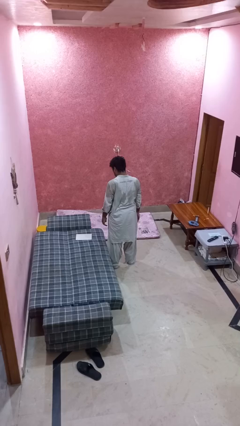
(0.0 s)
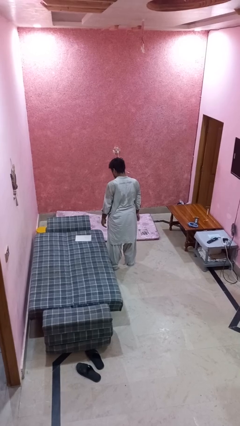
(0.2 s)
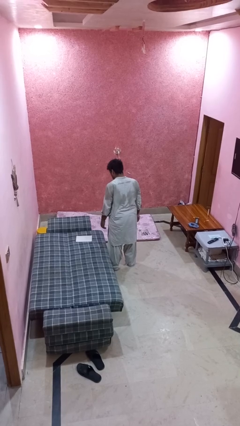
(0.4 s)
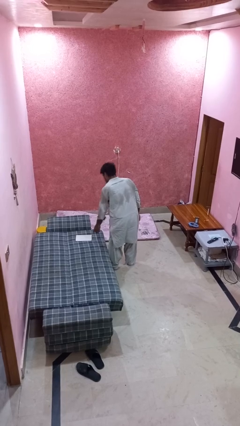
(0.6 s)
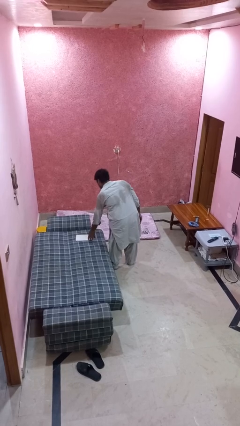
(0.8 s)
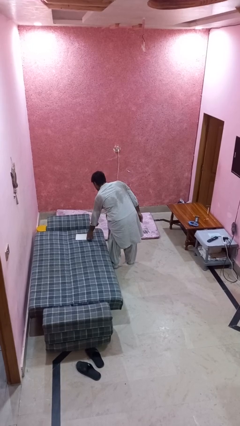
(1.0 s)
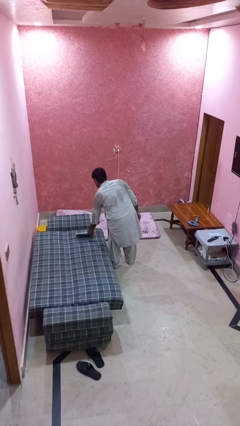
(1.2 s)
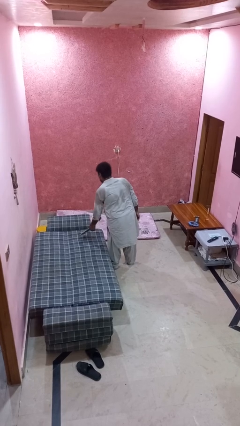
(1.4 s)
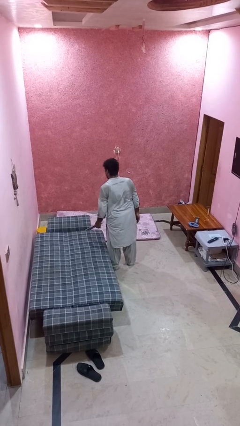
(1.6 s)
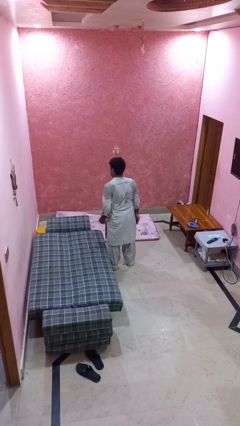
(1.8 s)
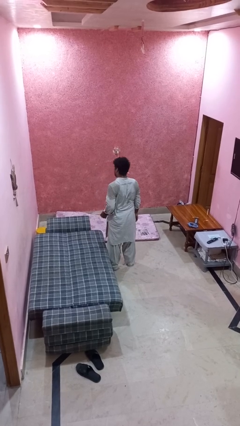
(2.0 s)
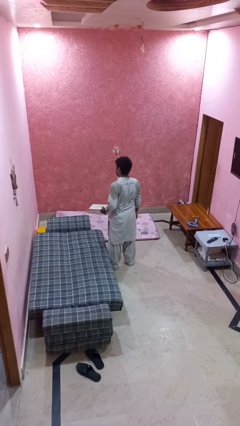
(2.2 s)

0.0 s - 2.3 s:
person picks up object from bed

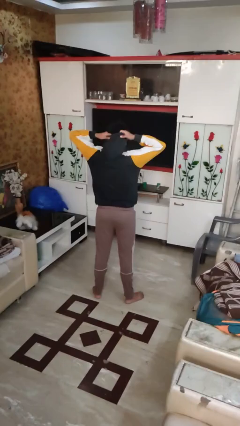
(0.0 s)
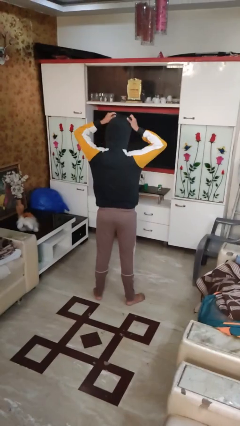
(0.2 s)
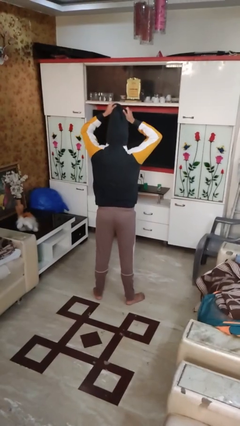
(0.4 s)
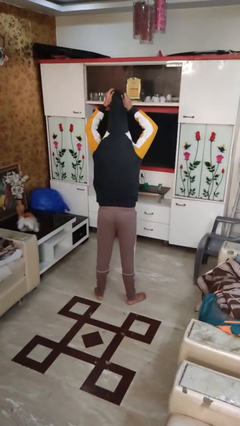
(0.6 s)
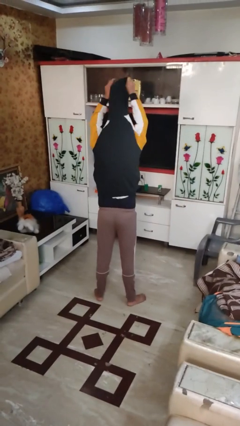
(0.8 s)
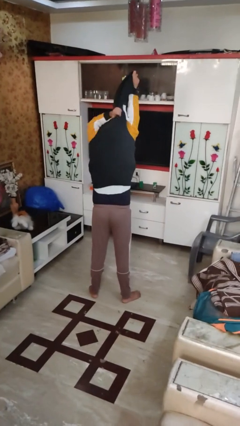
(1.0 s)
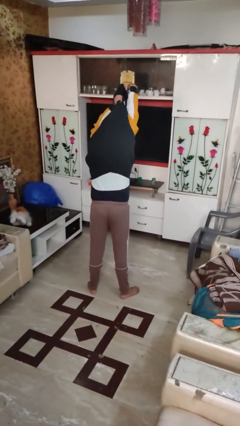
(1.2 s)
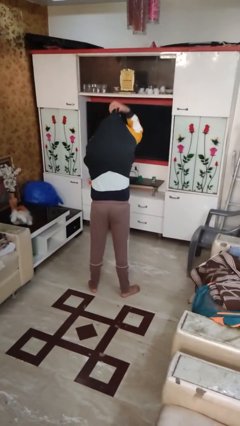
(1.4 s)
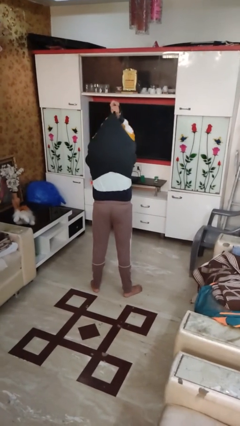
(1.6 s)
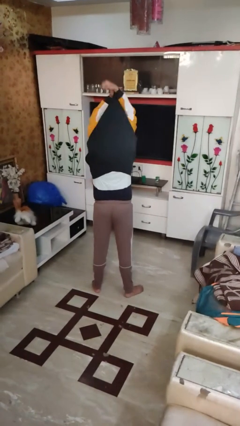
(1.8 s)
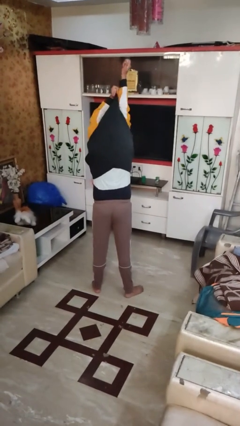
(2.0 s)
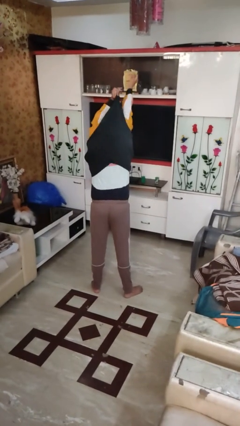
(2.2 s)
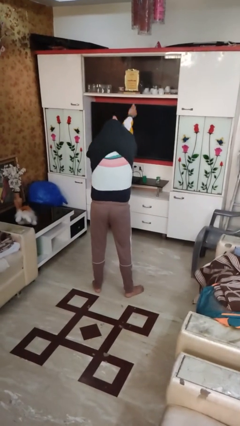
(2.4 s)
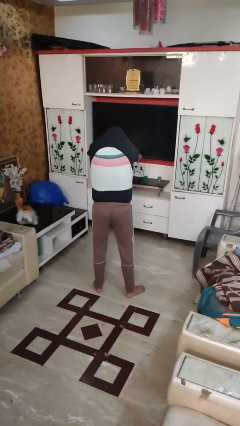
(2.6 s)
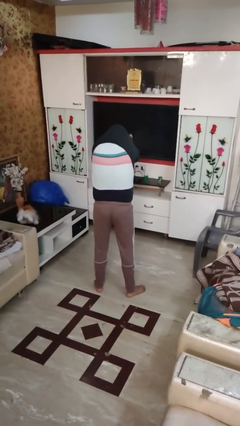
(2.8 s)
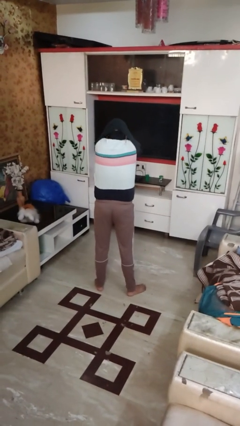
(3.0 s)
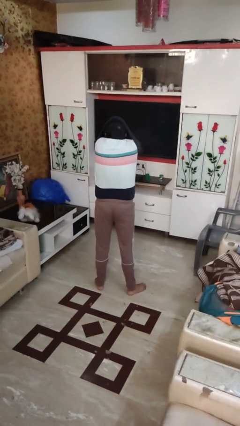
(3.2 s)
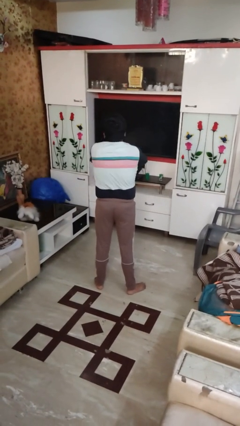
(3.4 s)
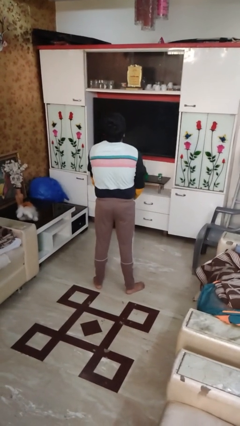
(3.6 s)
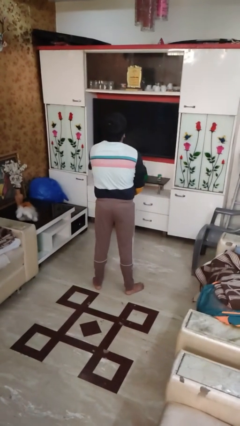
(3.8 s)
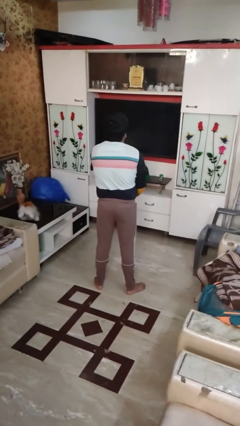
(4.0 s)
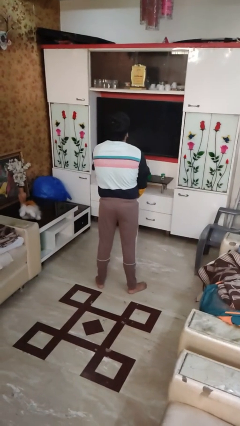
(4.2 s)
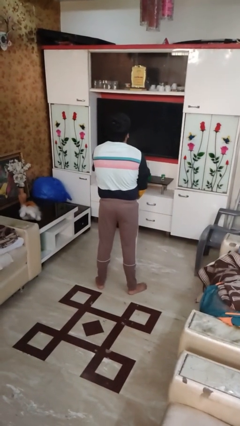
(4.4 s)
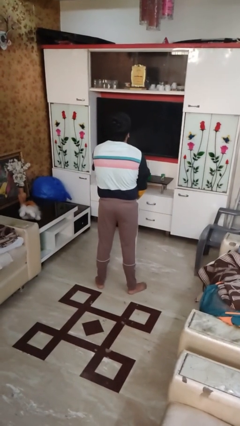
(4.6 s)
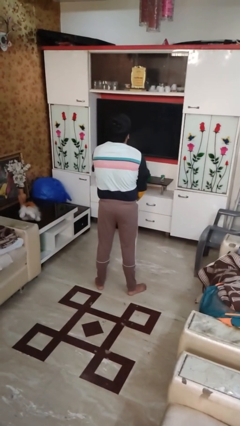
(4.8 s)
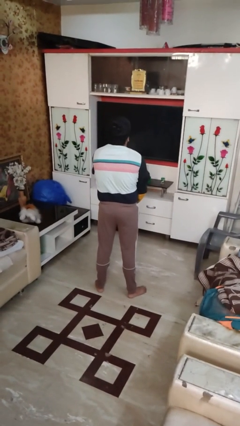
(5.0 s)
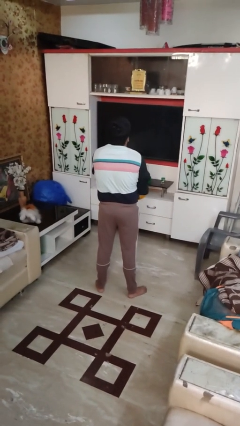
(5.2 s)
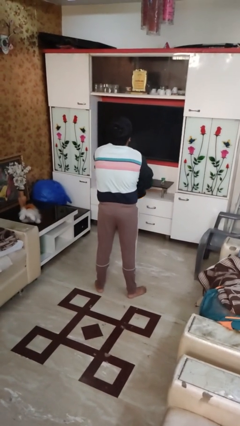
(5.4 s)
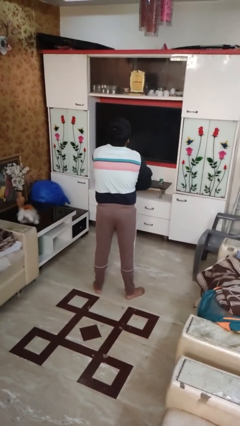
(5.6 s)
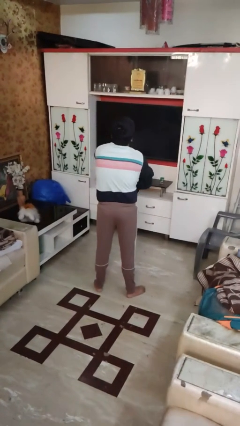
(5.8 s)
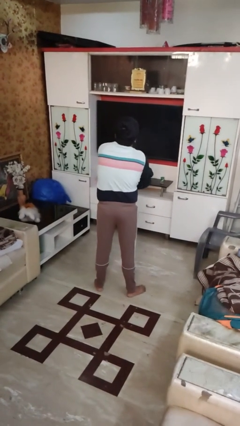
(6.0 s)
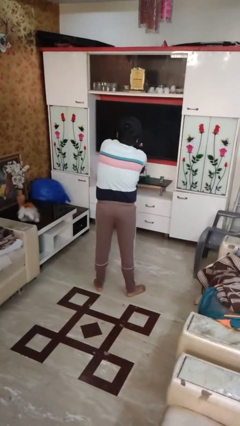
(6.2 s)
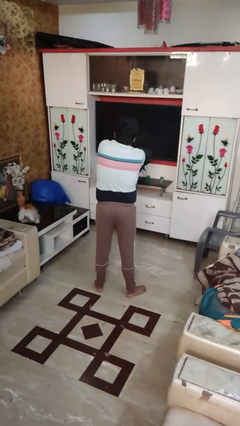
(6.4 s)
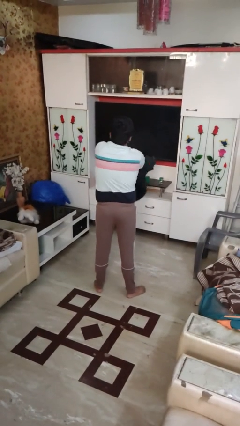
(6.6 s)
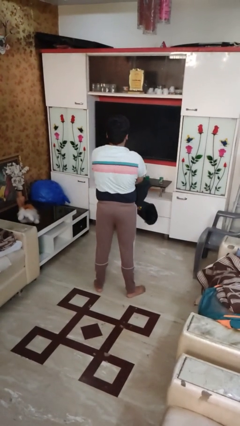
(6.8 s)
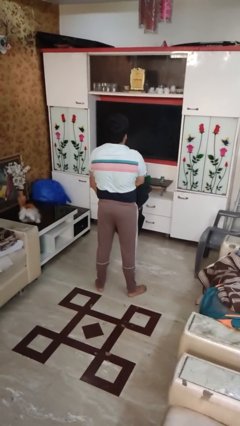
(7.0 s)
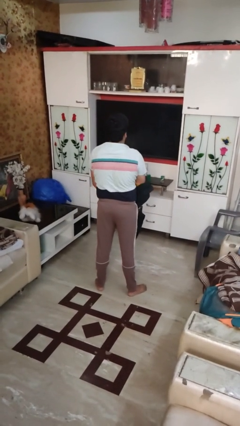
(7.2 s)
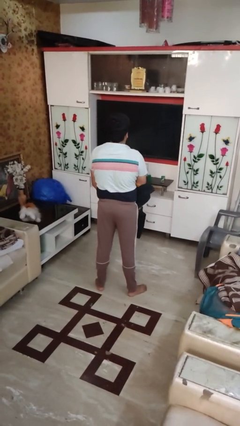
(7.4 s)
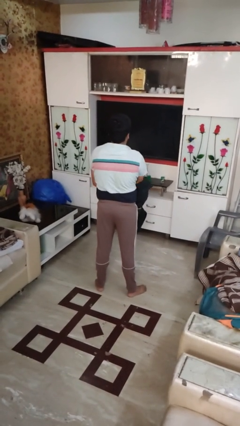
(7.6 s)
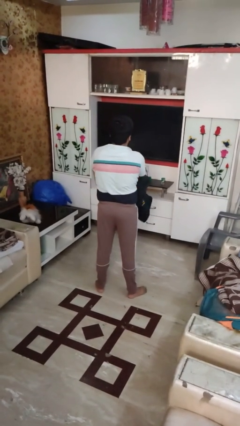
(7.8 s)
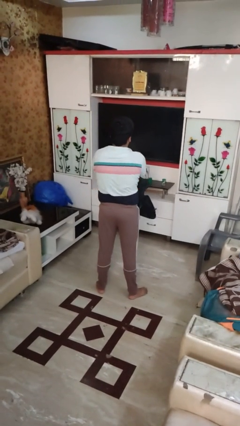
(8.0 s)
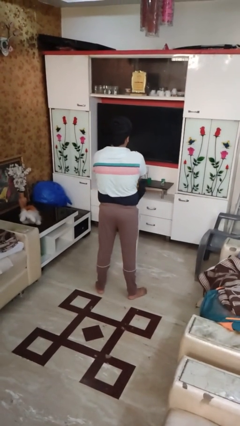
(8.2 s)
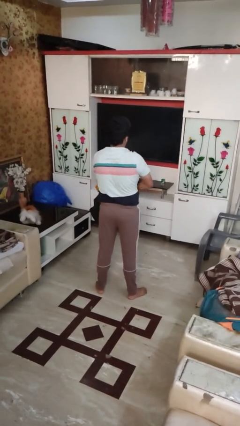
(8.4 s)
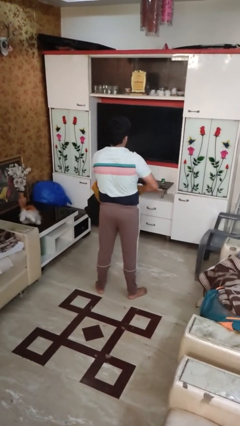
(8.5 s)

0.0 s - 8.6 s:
person takes off hoodie

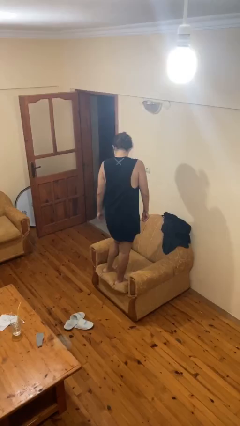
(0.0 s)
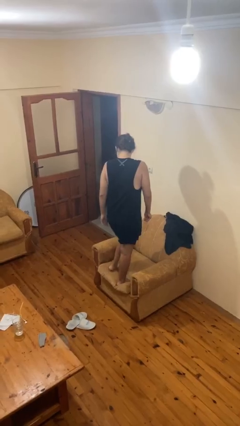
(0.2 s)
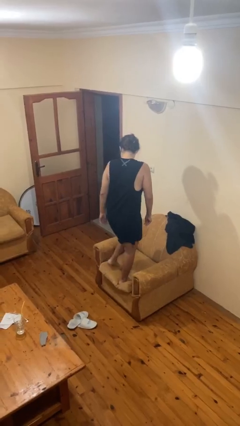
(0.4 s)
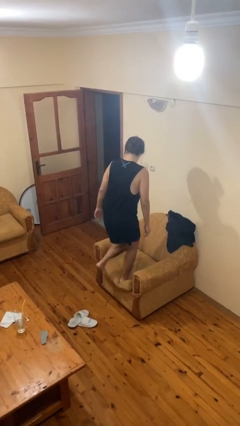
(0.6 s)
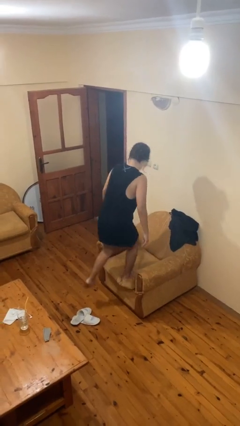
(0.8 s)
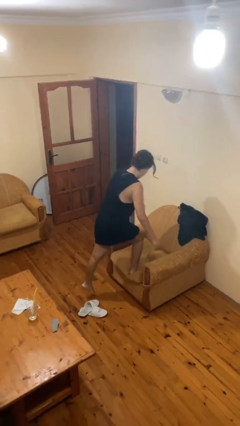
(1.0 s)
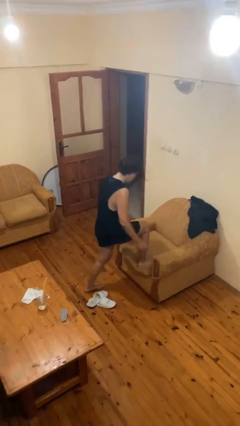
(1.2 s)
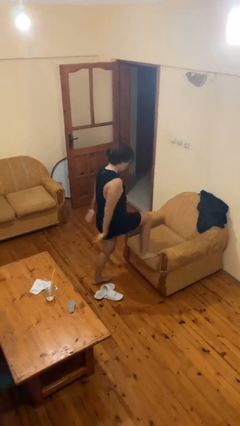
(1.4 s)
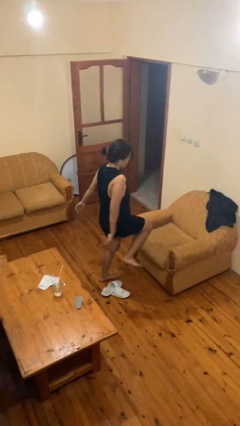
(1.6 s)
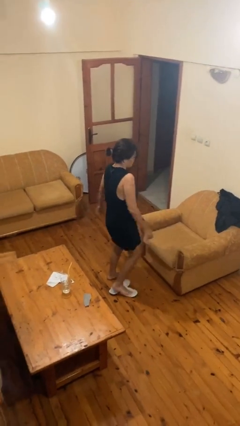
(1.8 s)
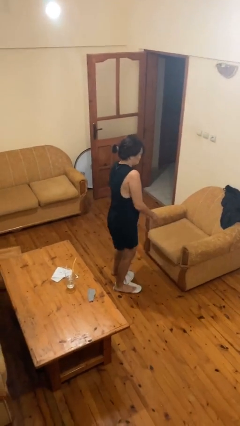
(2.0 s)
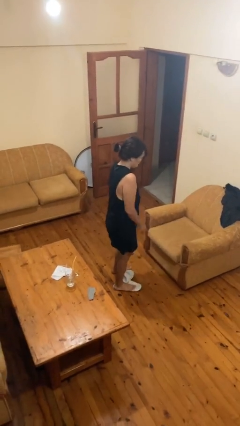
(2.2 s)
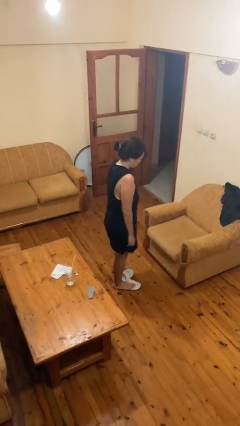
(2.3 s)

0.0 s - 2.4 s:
person climbs off chair

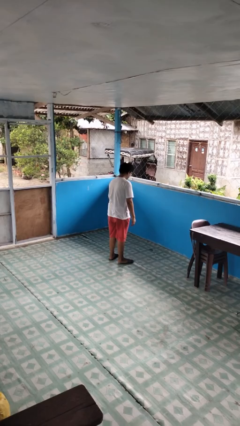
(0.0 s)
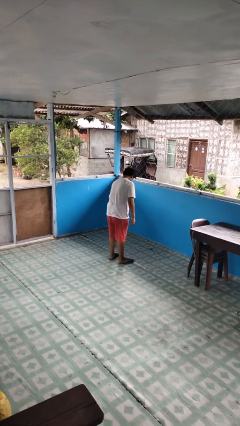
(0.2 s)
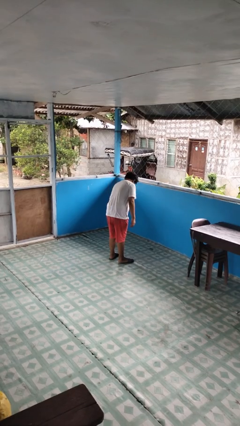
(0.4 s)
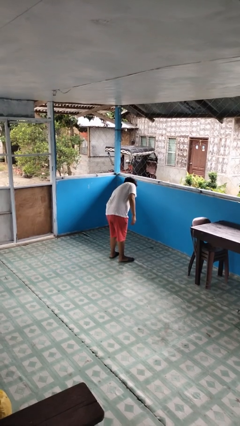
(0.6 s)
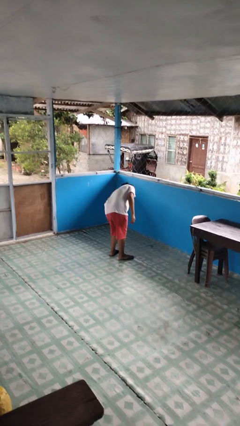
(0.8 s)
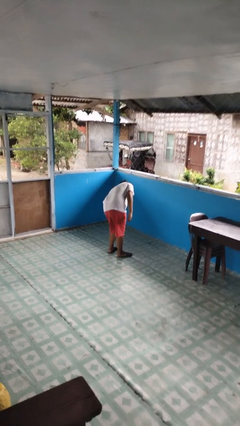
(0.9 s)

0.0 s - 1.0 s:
person swats bug

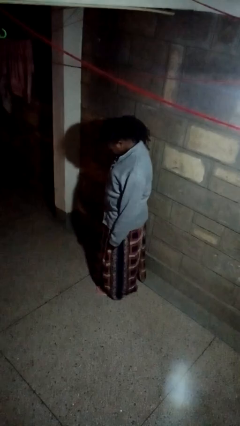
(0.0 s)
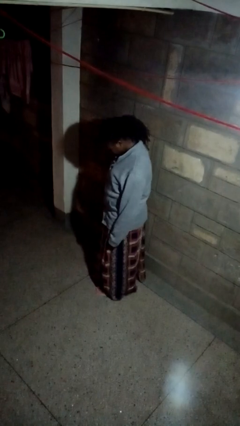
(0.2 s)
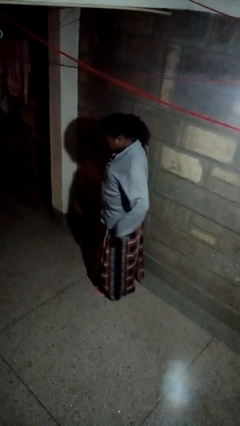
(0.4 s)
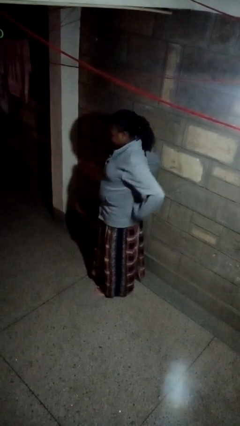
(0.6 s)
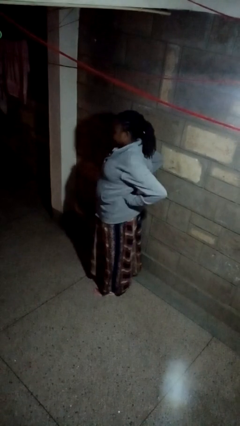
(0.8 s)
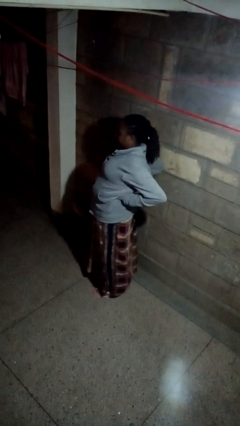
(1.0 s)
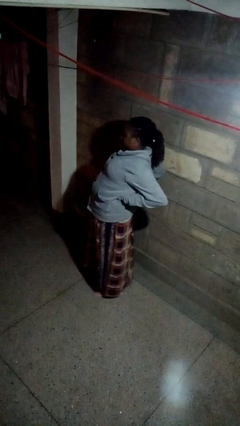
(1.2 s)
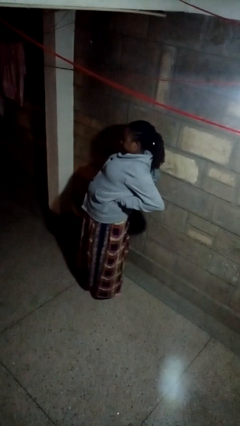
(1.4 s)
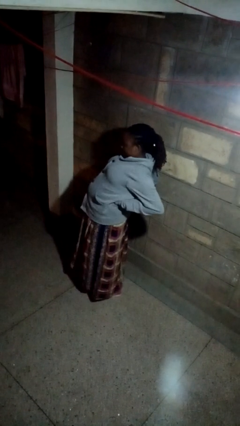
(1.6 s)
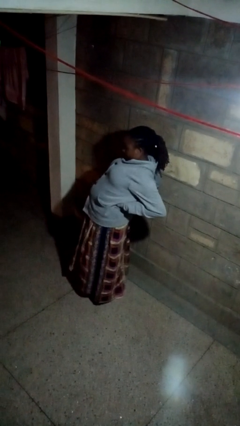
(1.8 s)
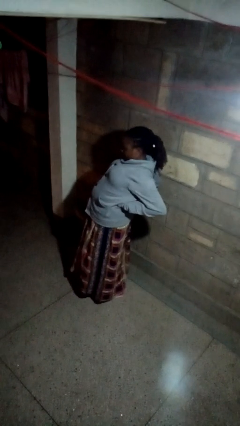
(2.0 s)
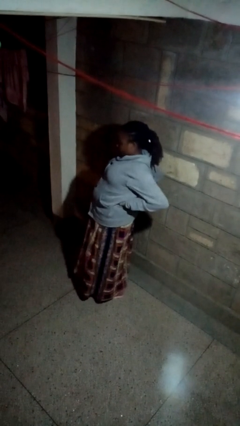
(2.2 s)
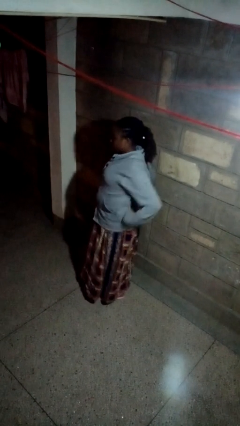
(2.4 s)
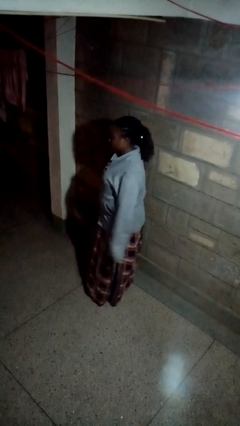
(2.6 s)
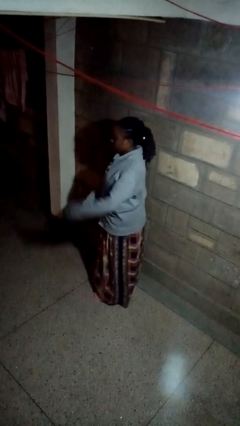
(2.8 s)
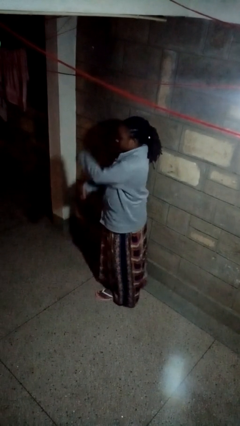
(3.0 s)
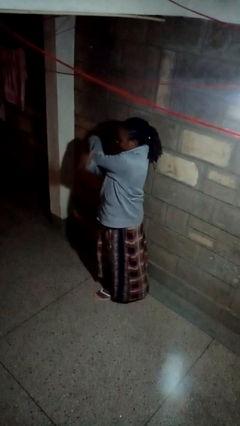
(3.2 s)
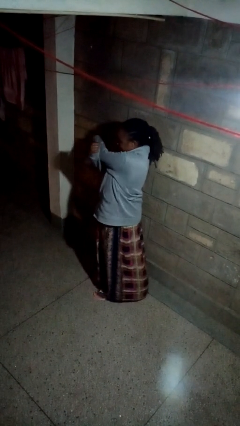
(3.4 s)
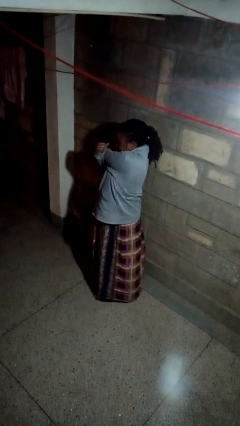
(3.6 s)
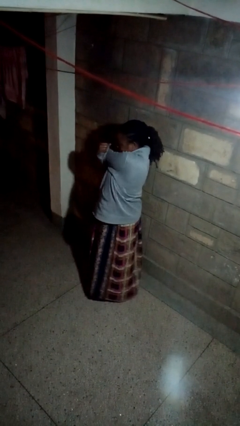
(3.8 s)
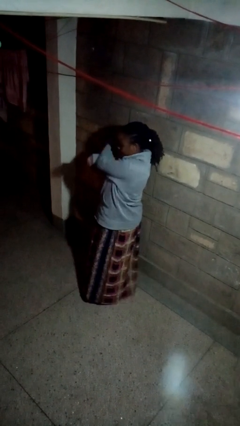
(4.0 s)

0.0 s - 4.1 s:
person stretches back
